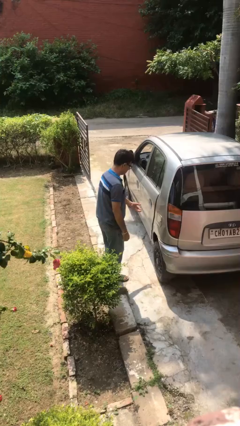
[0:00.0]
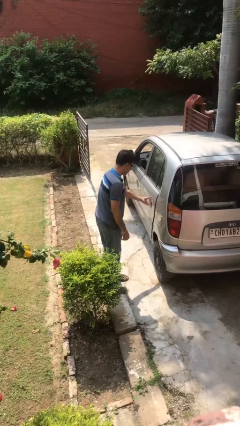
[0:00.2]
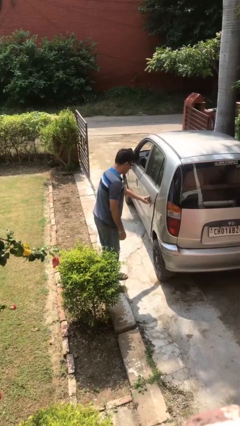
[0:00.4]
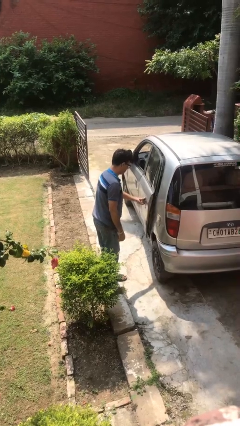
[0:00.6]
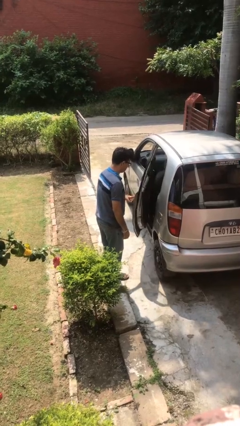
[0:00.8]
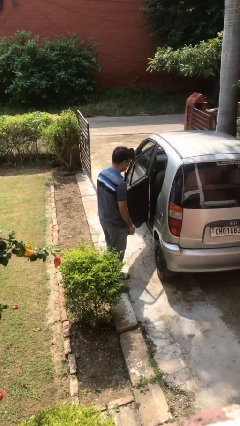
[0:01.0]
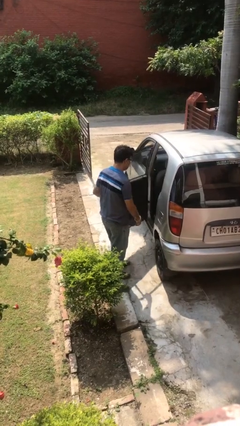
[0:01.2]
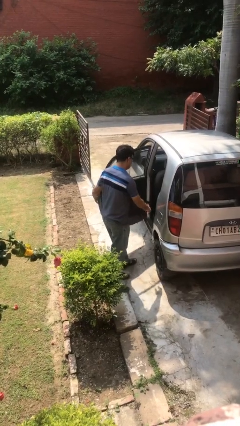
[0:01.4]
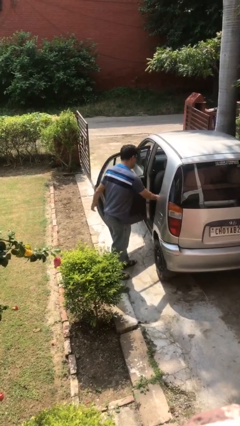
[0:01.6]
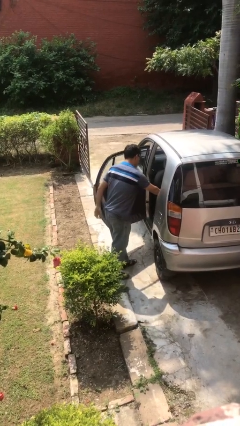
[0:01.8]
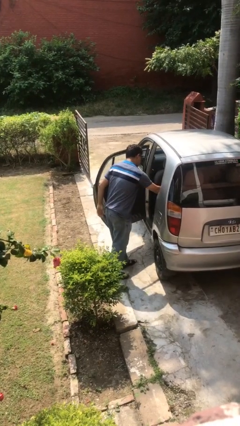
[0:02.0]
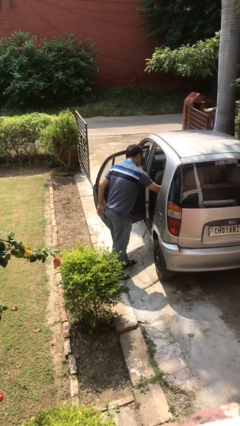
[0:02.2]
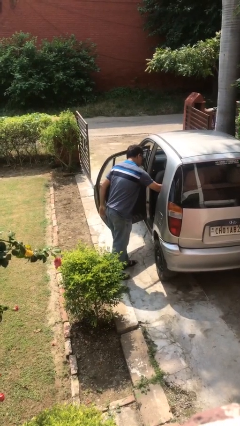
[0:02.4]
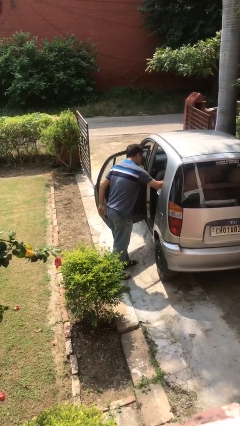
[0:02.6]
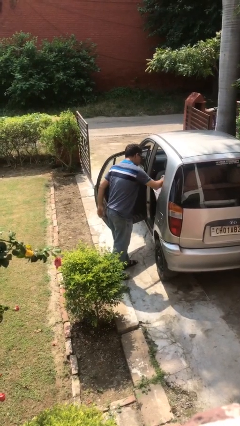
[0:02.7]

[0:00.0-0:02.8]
person opens car door

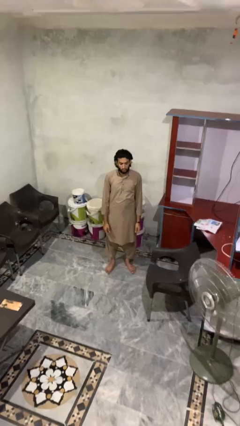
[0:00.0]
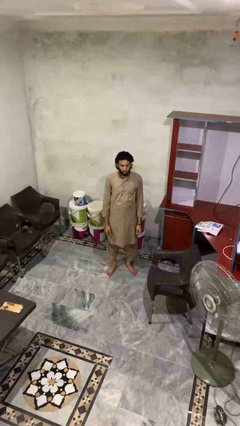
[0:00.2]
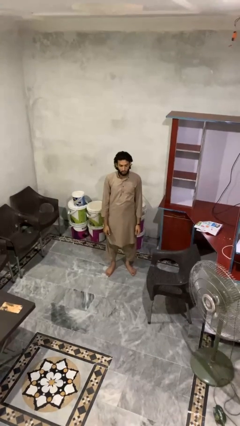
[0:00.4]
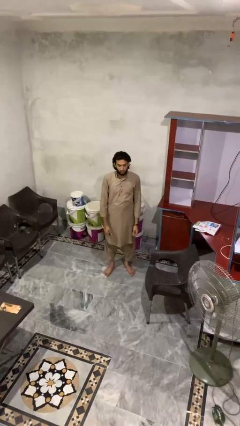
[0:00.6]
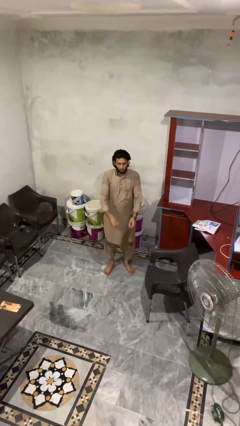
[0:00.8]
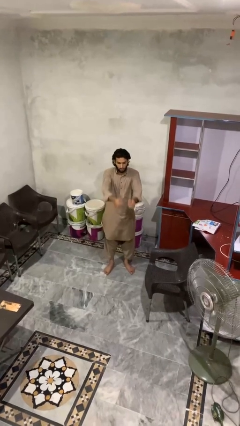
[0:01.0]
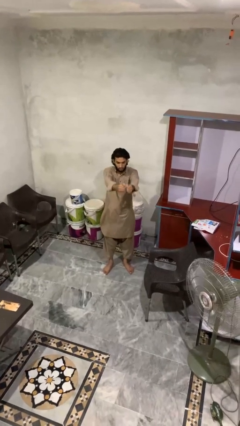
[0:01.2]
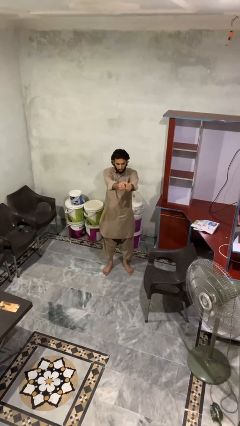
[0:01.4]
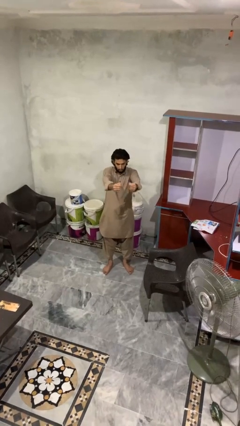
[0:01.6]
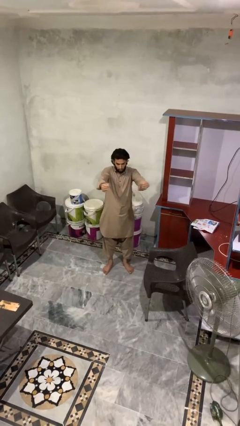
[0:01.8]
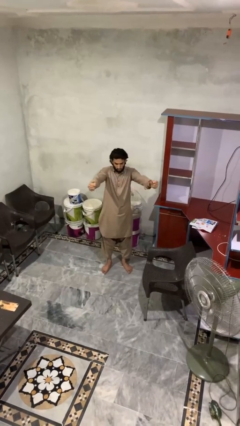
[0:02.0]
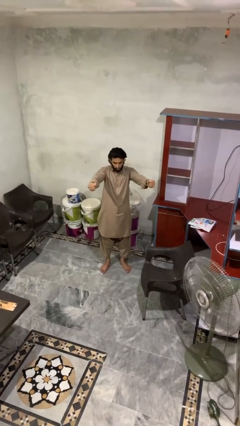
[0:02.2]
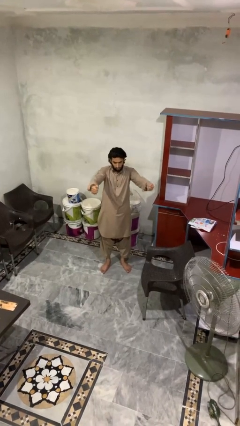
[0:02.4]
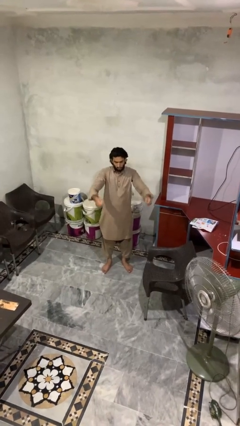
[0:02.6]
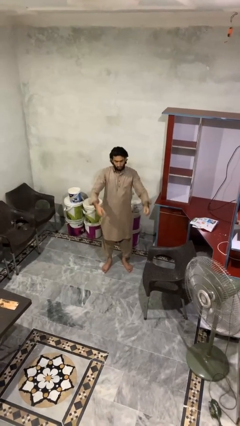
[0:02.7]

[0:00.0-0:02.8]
person gestures zoom in

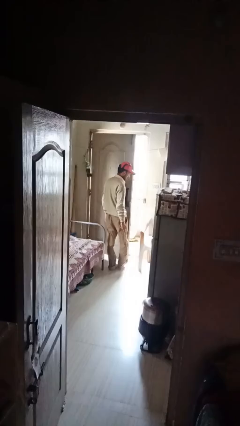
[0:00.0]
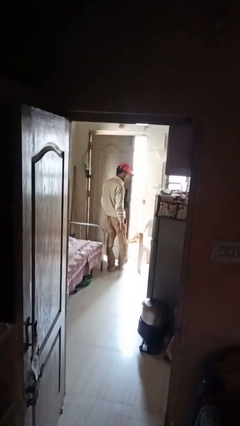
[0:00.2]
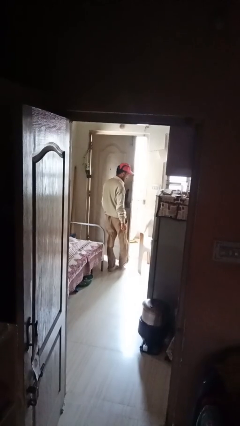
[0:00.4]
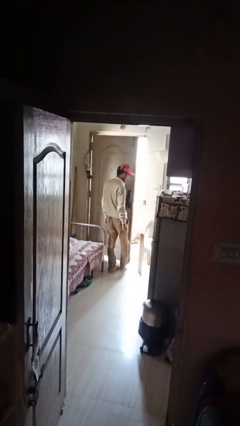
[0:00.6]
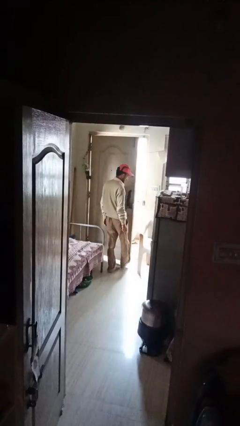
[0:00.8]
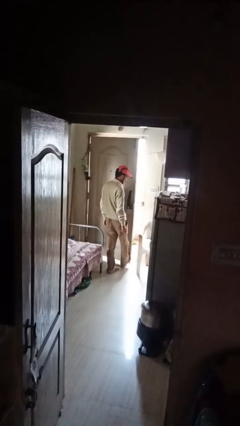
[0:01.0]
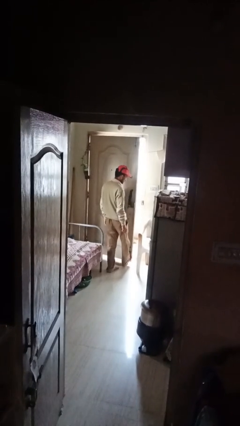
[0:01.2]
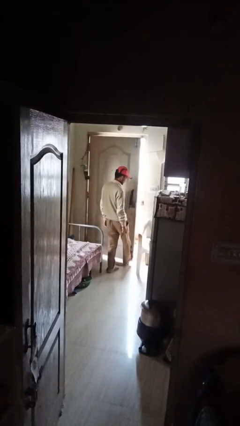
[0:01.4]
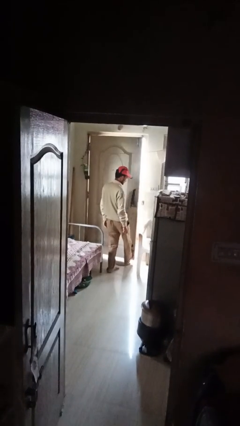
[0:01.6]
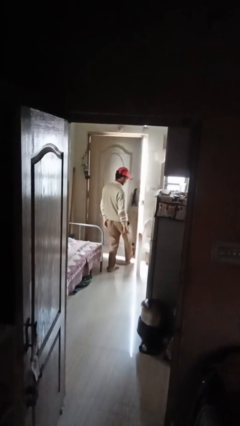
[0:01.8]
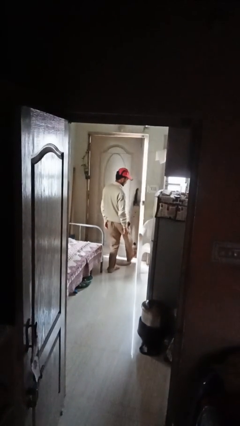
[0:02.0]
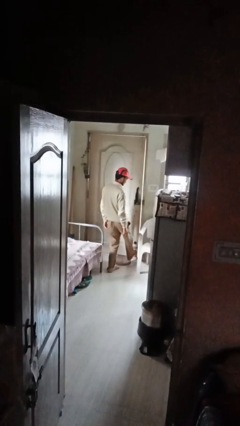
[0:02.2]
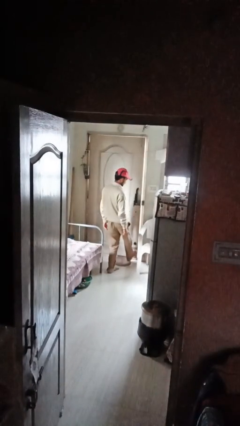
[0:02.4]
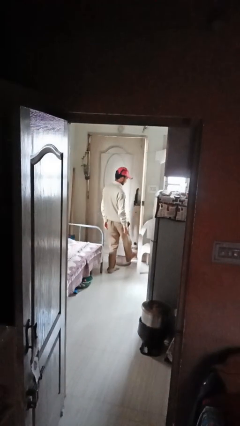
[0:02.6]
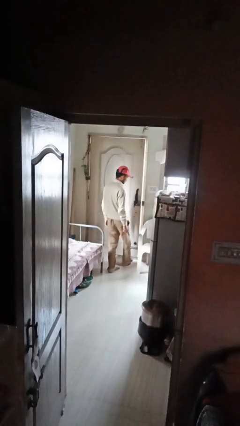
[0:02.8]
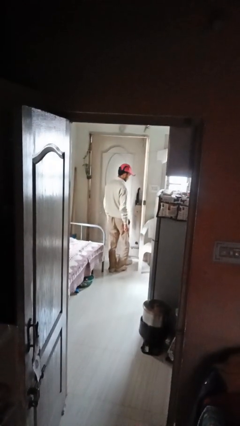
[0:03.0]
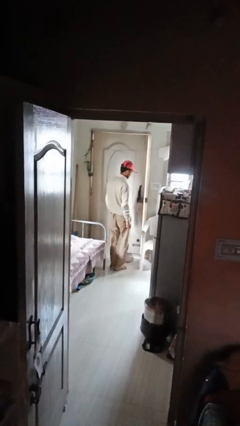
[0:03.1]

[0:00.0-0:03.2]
person closes door with foot

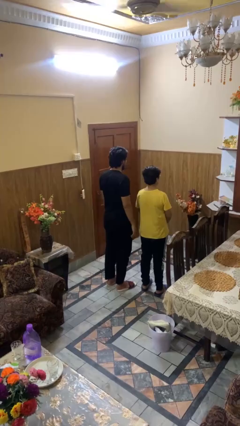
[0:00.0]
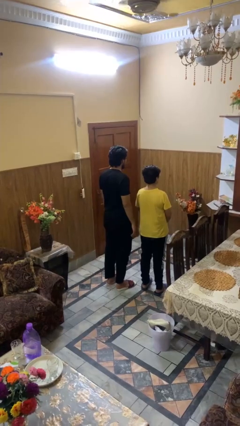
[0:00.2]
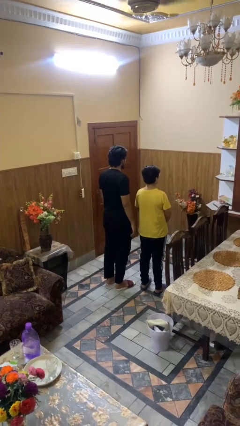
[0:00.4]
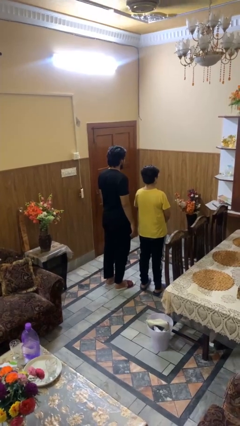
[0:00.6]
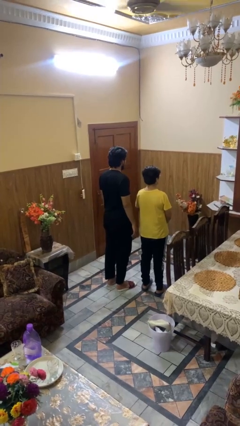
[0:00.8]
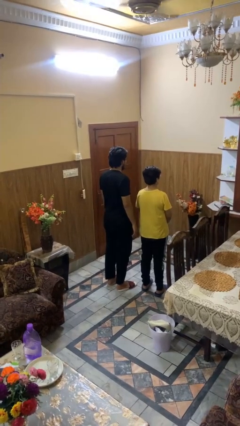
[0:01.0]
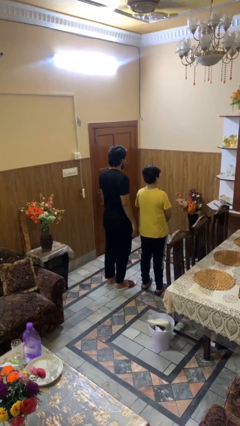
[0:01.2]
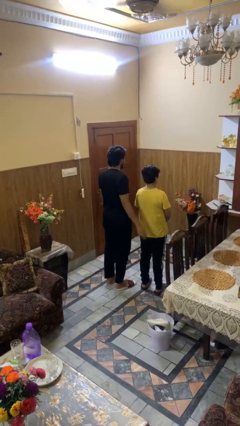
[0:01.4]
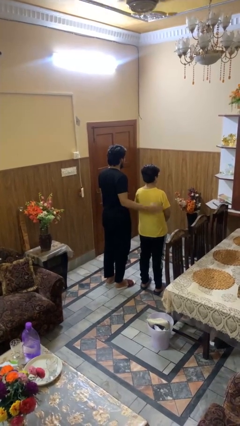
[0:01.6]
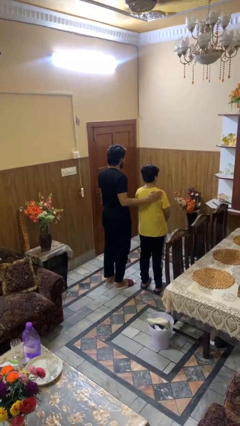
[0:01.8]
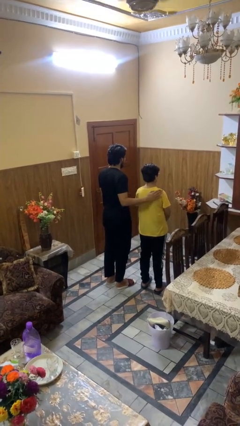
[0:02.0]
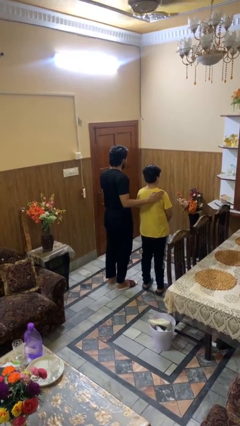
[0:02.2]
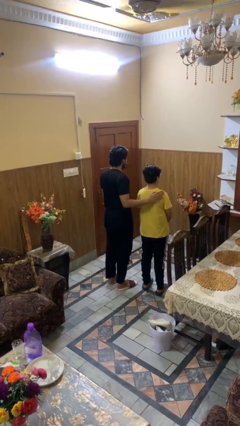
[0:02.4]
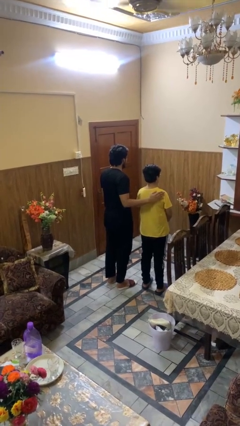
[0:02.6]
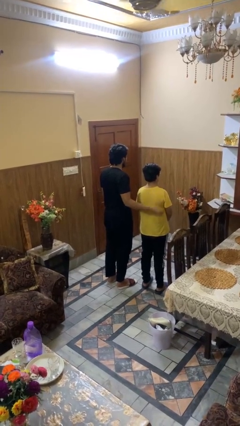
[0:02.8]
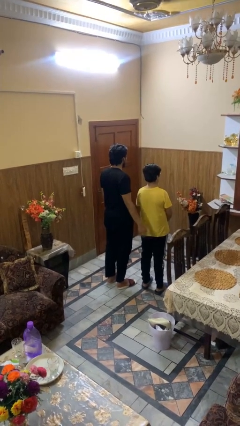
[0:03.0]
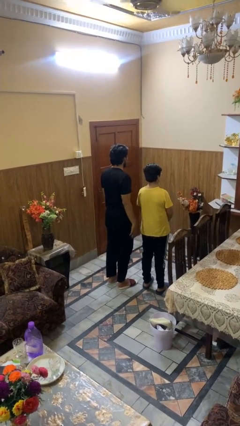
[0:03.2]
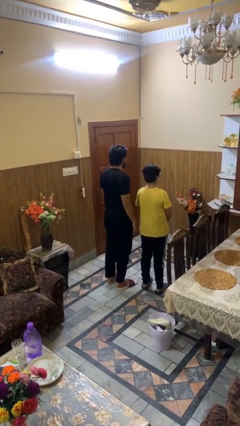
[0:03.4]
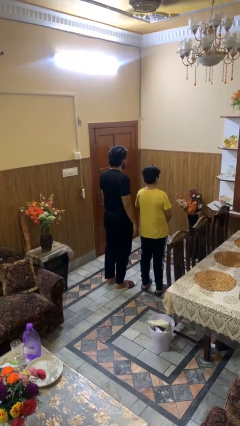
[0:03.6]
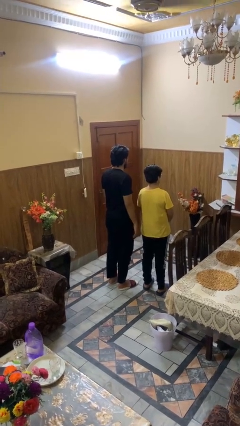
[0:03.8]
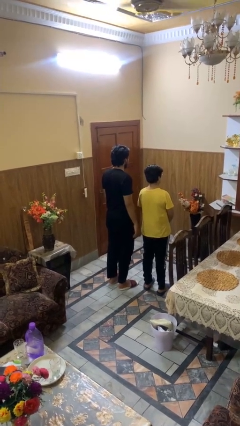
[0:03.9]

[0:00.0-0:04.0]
person touches back of person

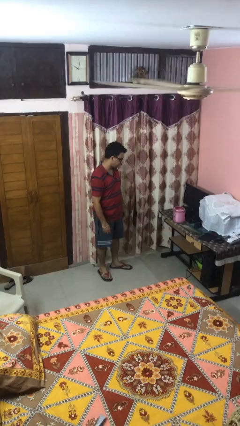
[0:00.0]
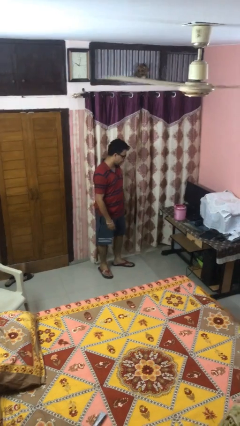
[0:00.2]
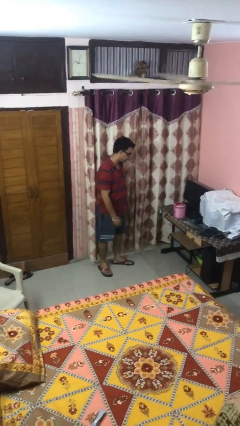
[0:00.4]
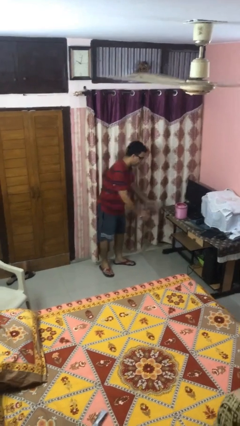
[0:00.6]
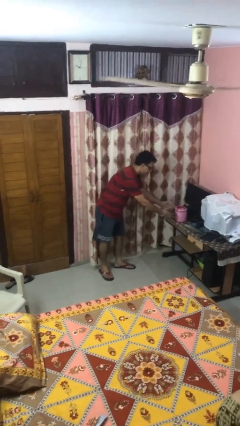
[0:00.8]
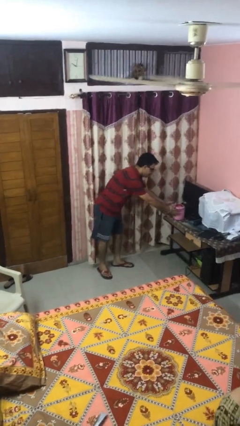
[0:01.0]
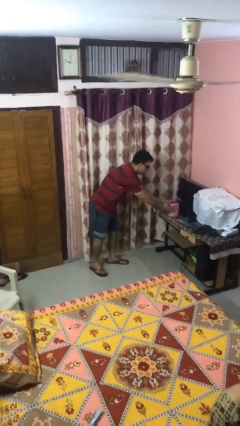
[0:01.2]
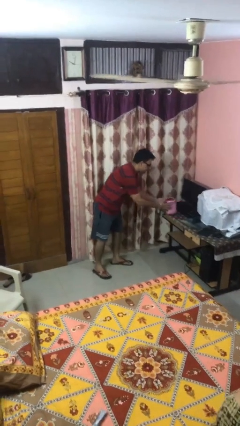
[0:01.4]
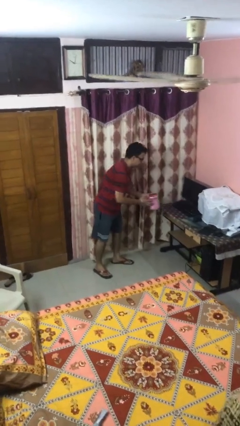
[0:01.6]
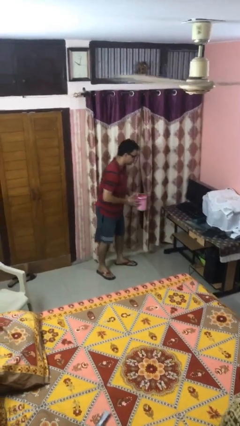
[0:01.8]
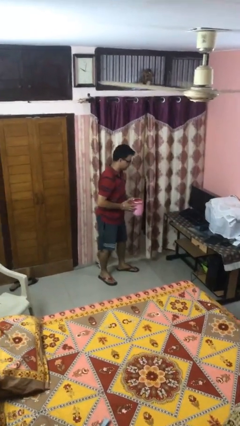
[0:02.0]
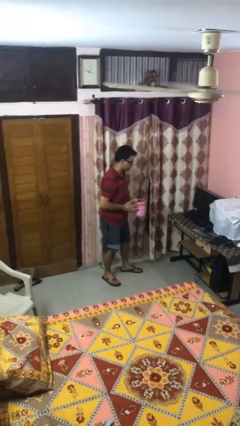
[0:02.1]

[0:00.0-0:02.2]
person picks up object from countertop

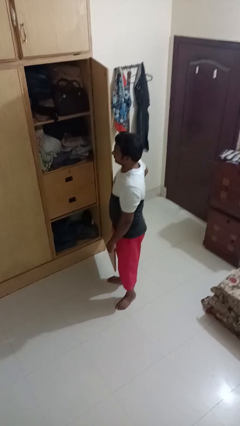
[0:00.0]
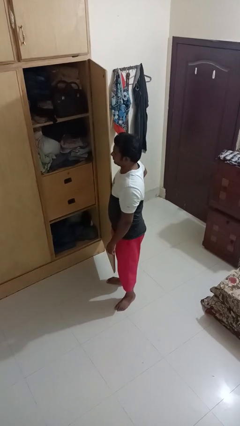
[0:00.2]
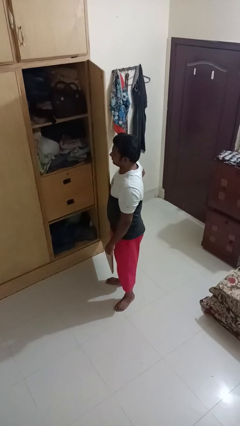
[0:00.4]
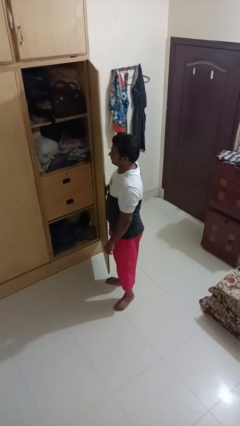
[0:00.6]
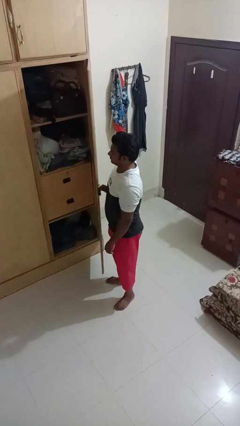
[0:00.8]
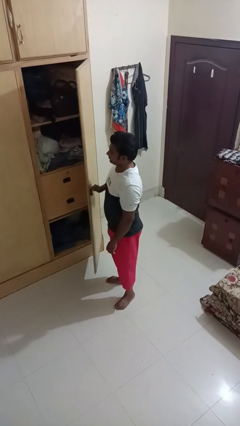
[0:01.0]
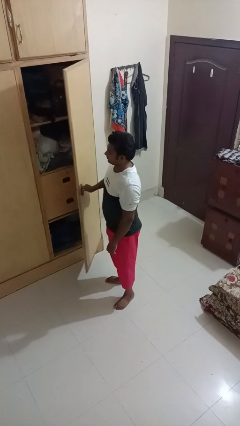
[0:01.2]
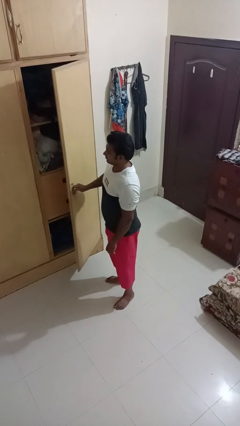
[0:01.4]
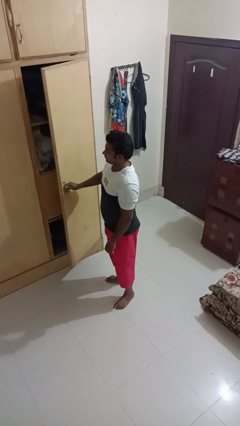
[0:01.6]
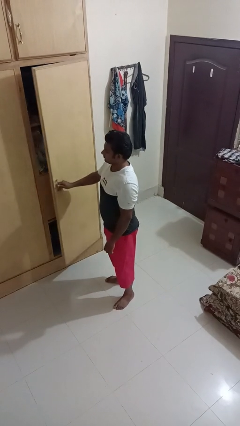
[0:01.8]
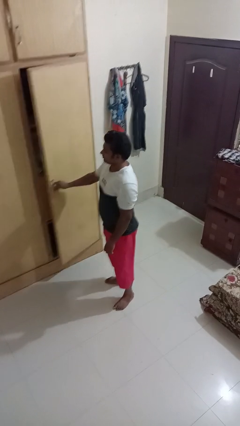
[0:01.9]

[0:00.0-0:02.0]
person closes closet door

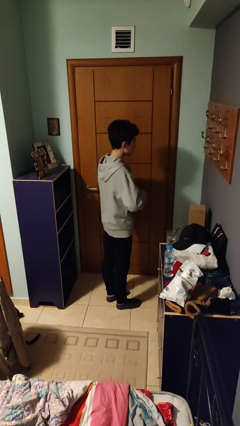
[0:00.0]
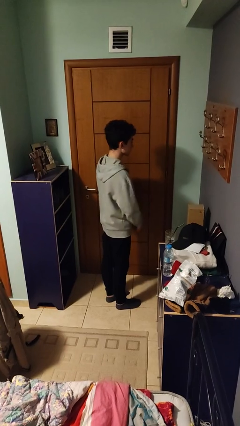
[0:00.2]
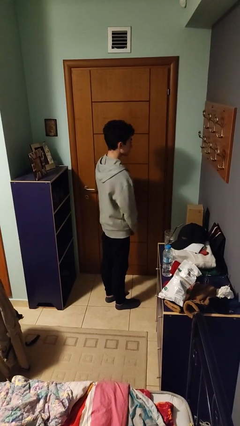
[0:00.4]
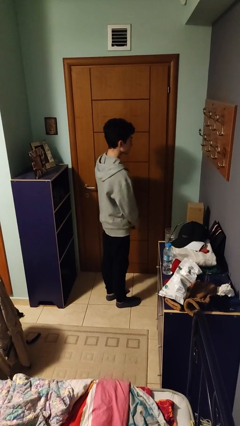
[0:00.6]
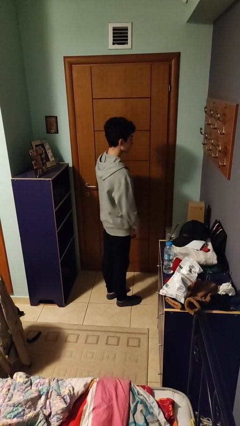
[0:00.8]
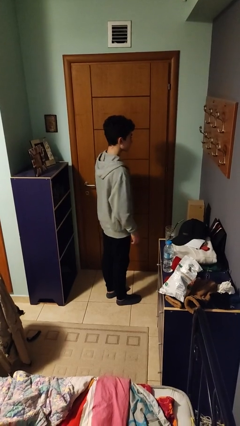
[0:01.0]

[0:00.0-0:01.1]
person unzips jacket
